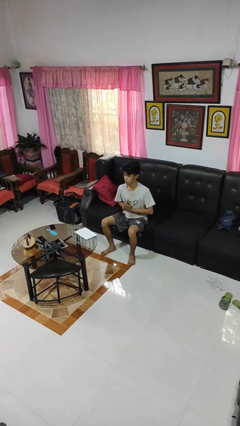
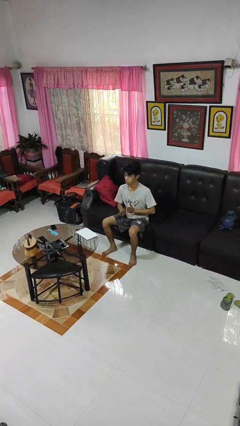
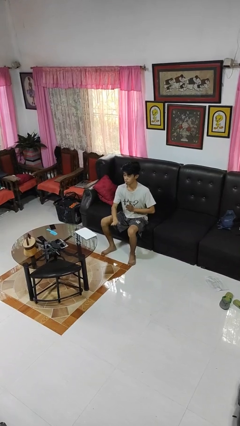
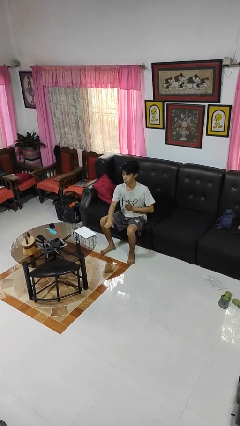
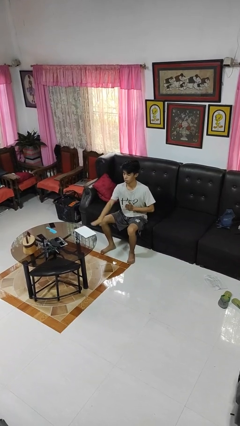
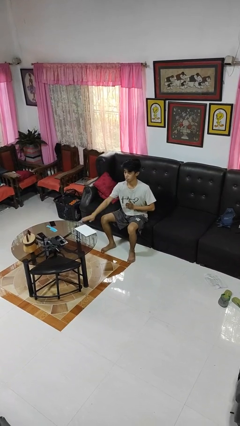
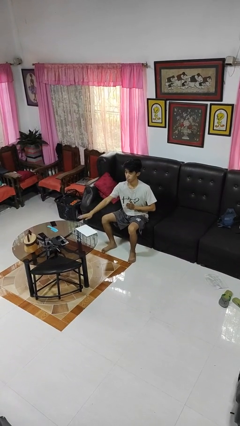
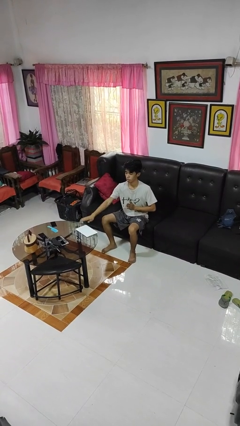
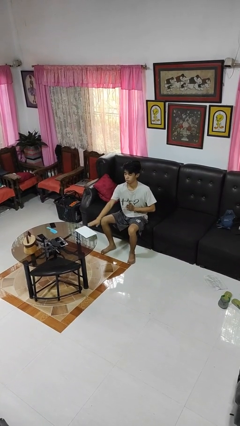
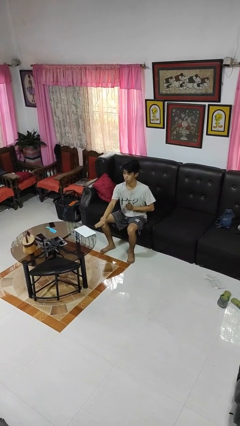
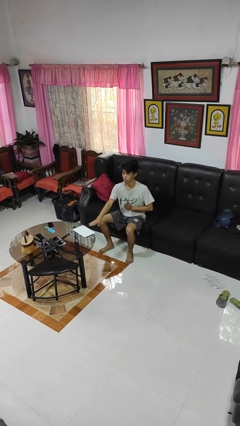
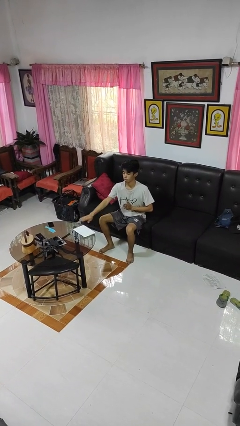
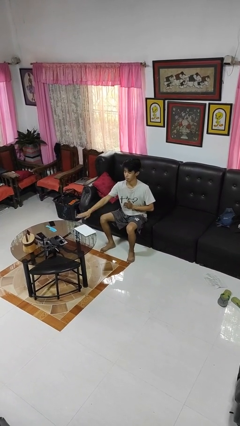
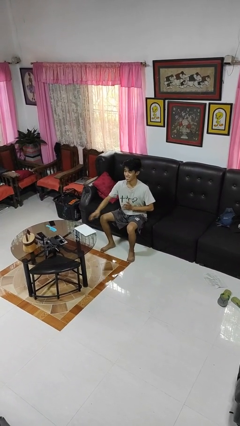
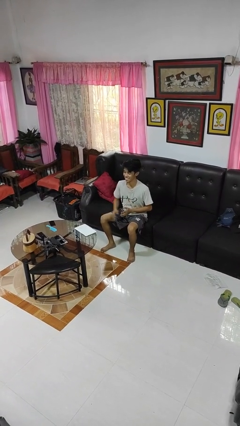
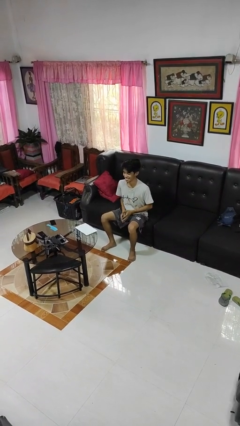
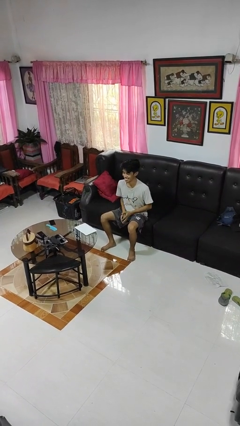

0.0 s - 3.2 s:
person waves hand over object

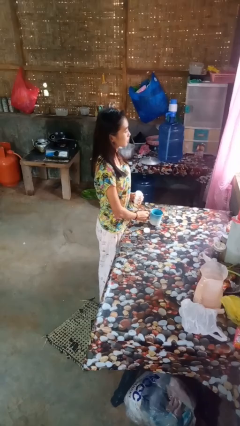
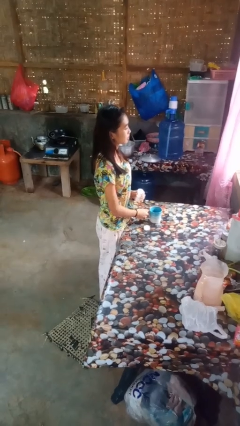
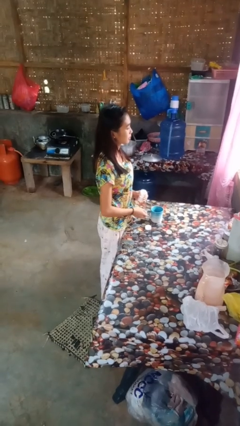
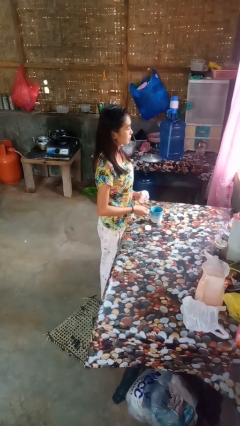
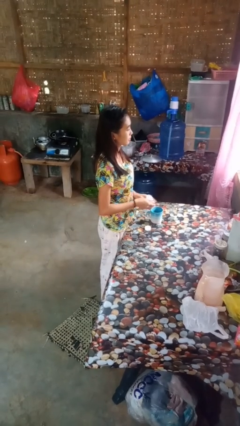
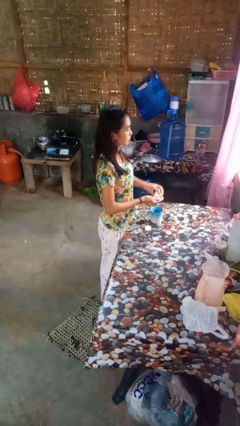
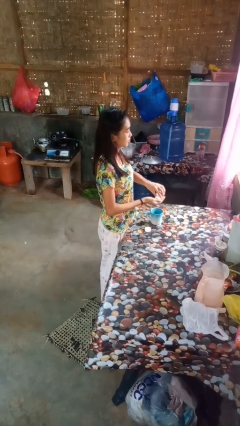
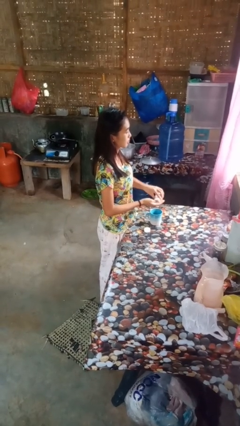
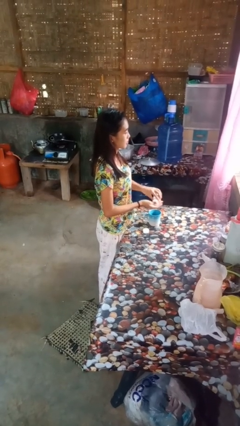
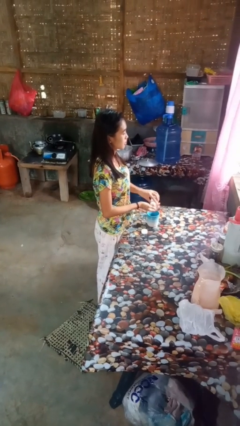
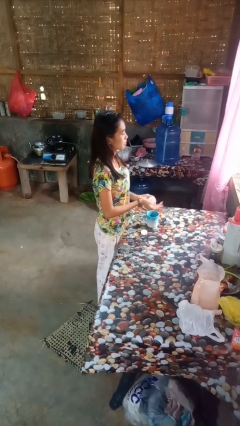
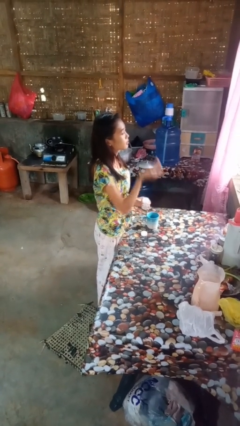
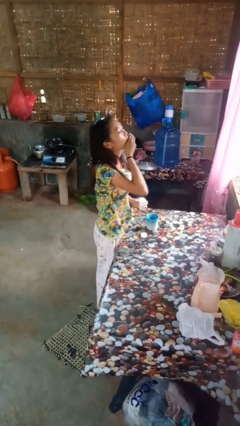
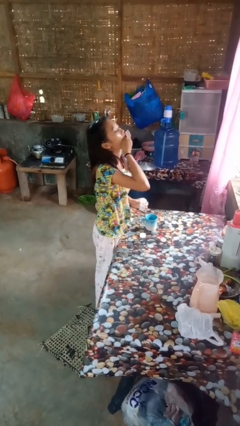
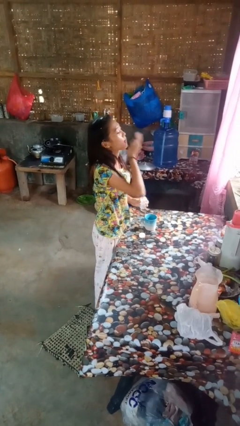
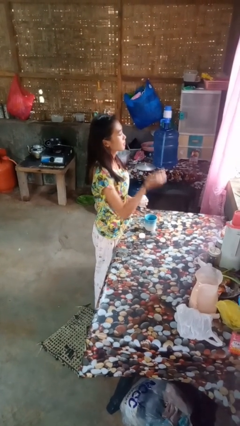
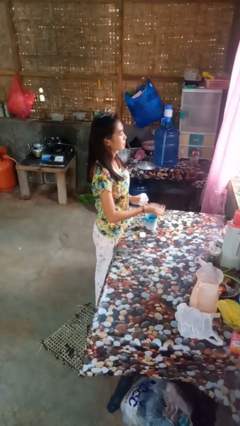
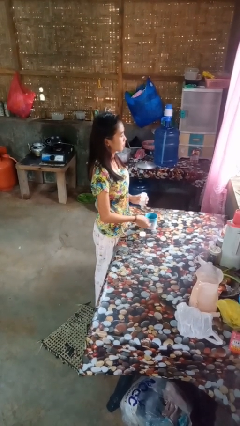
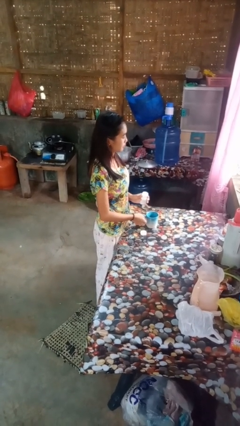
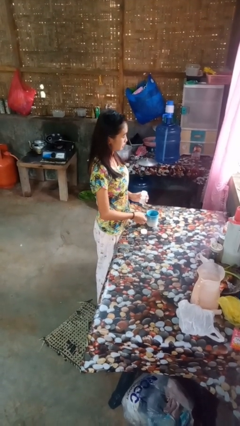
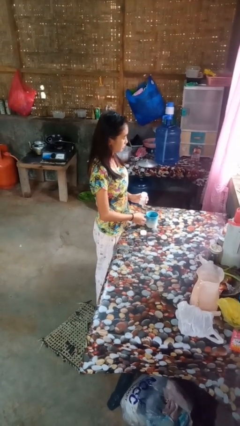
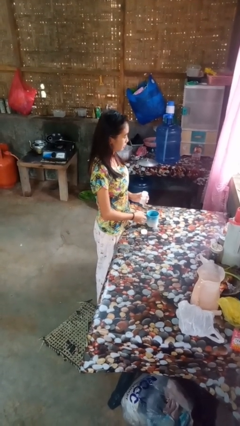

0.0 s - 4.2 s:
person takes medicine pills

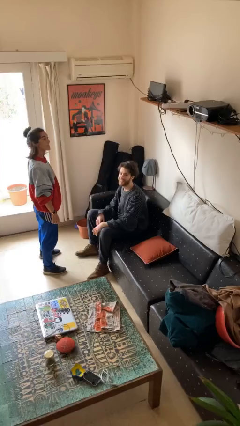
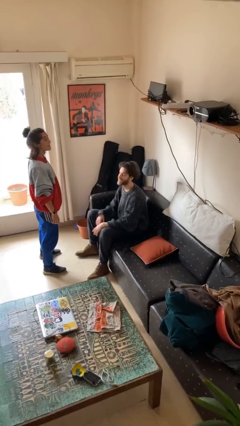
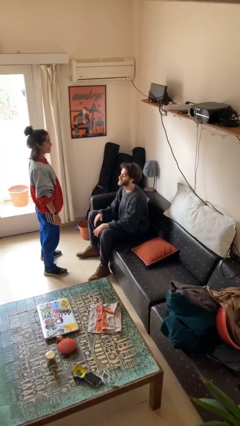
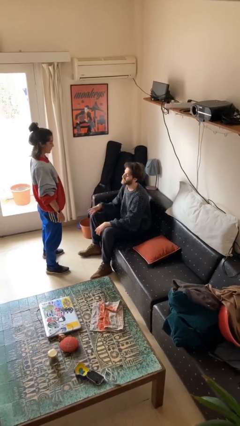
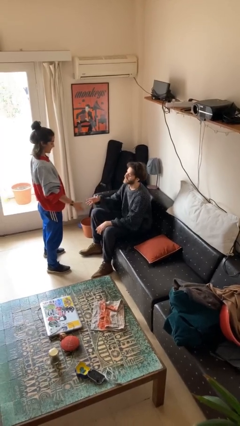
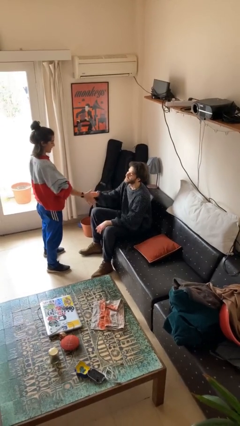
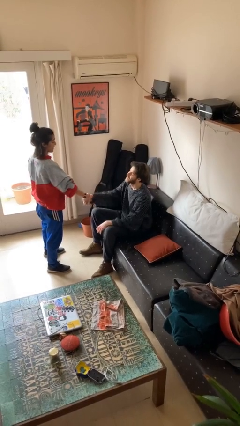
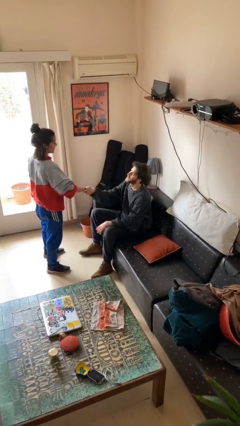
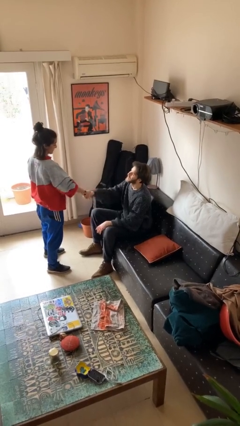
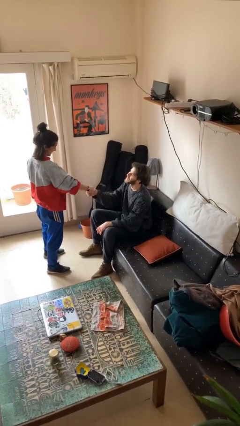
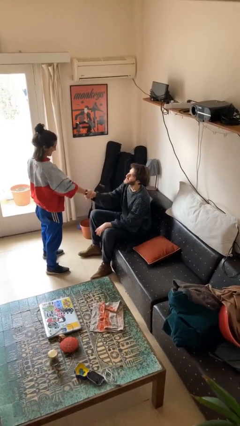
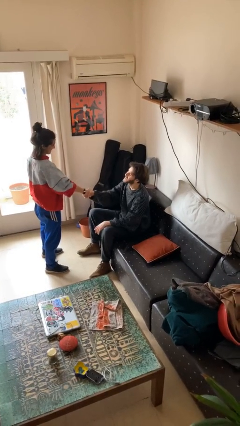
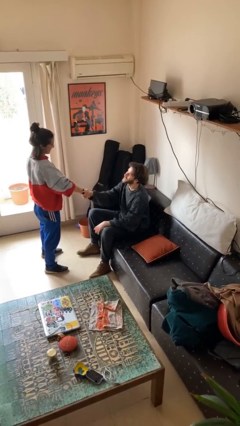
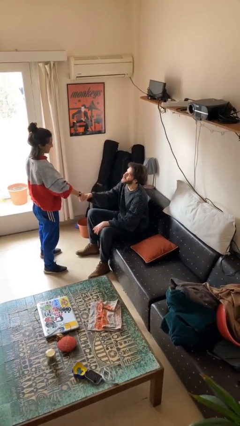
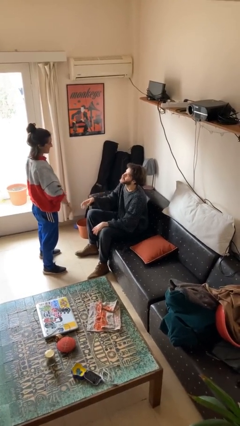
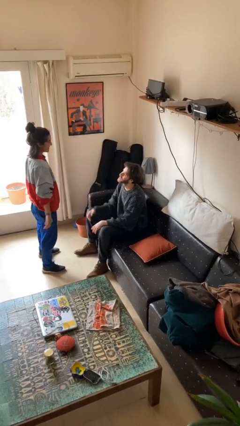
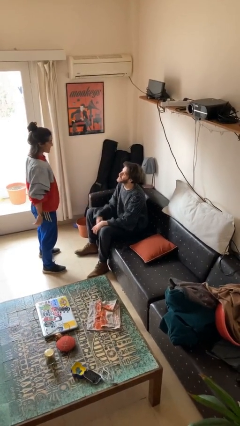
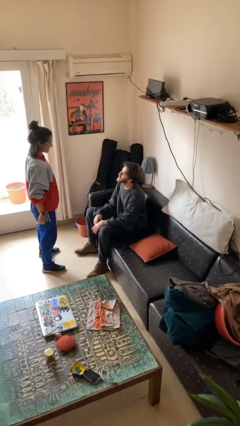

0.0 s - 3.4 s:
person shakes hand

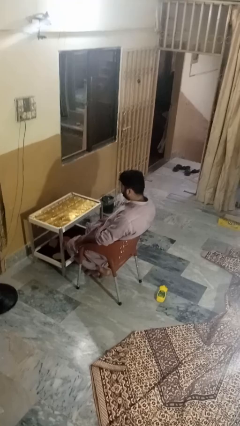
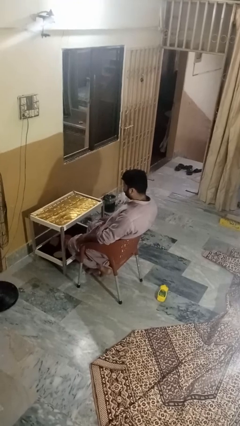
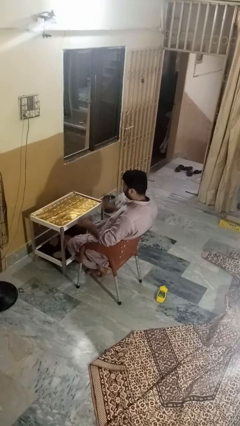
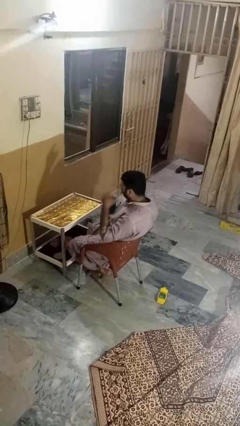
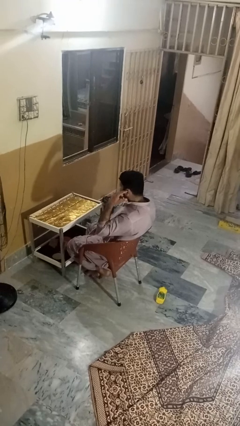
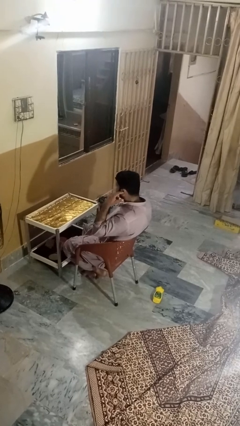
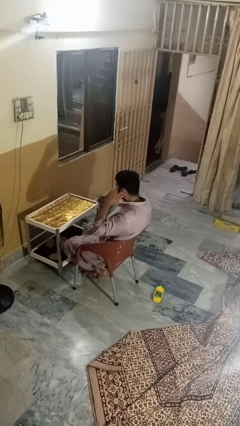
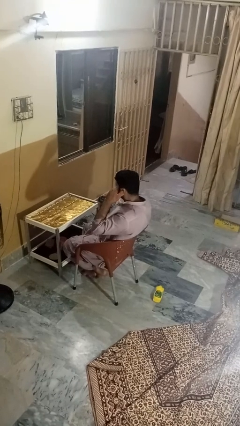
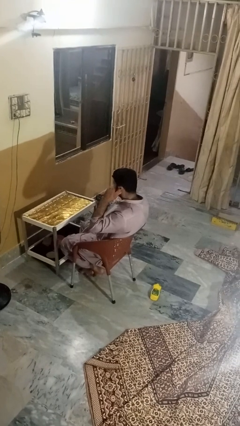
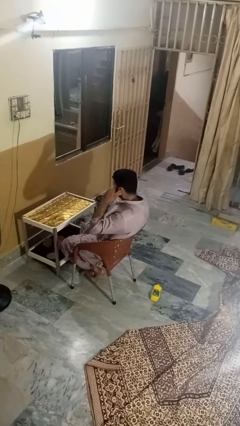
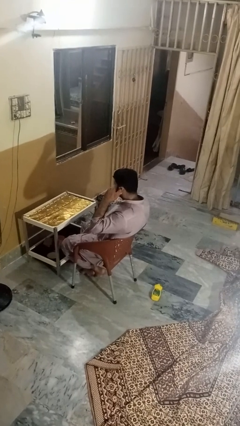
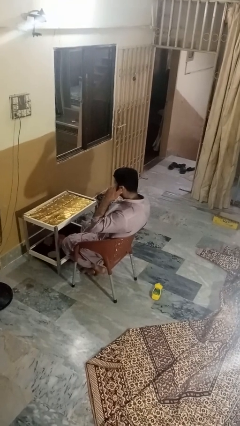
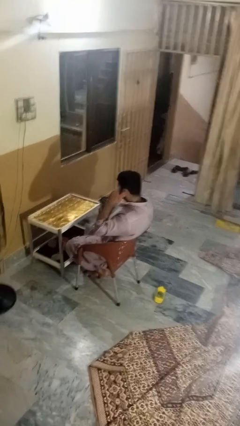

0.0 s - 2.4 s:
person puts fingers in ear

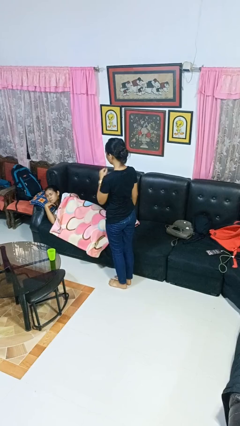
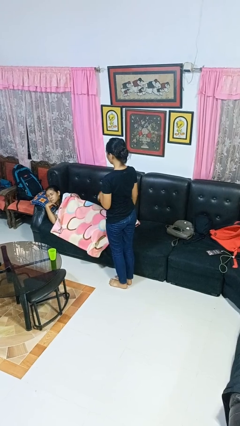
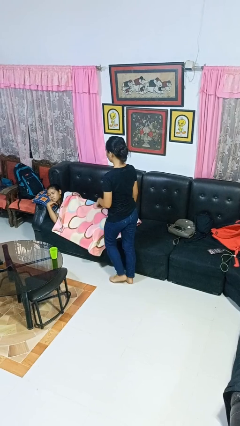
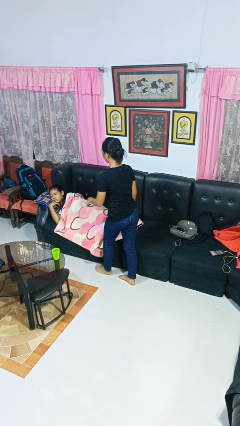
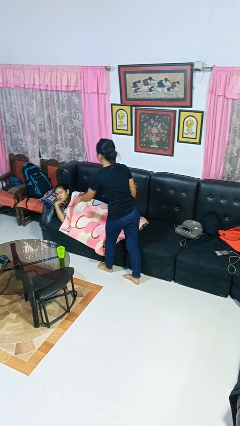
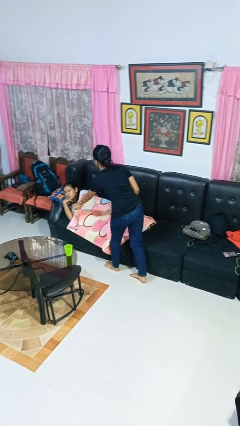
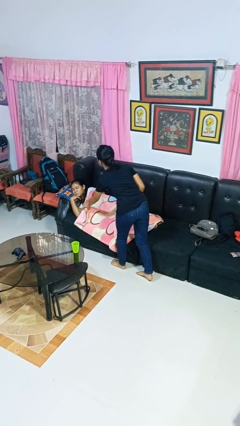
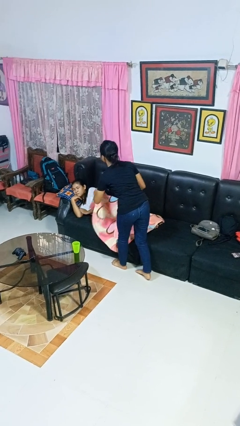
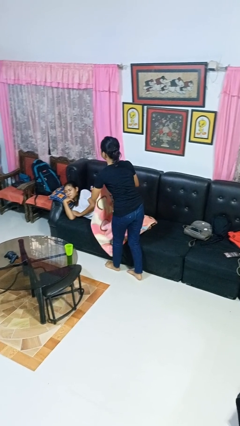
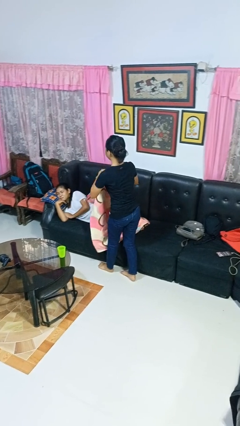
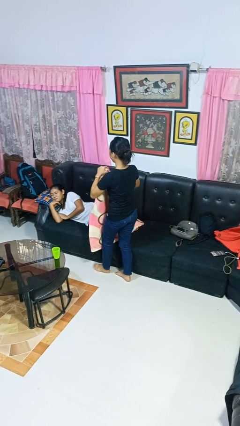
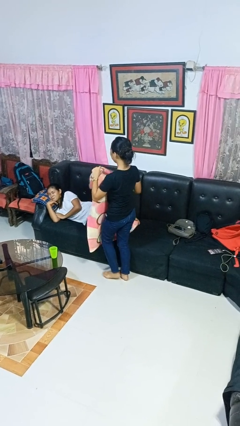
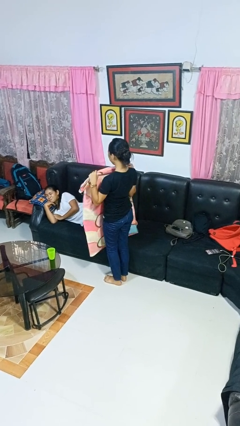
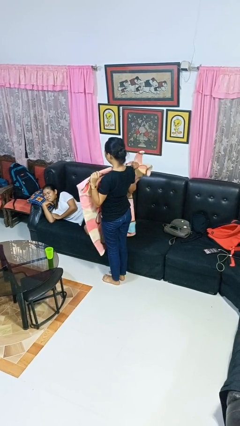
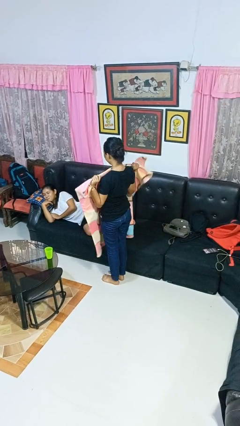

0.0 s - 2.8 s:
person uncovers friend with blanket

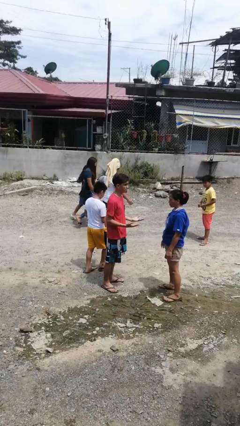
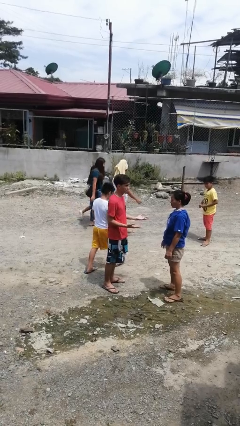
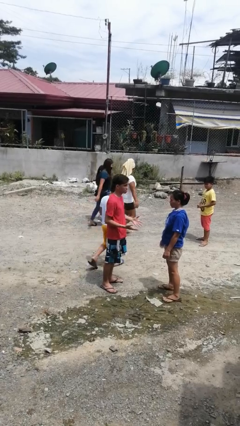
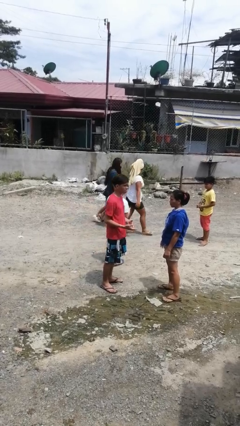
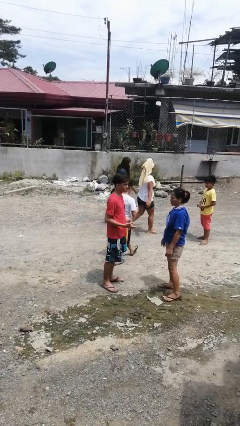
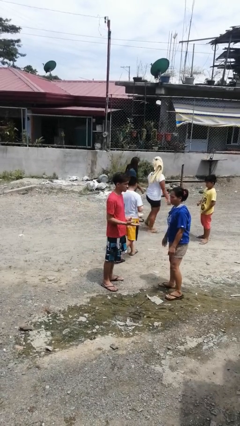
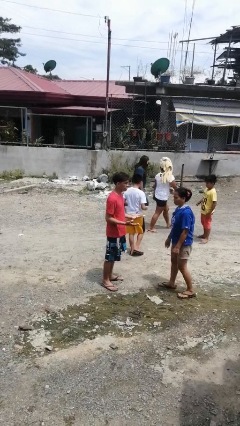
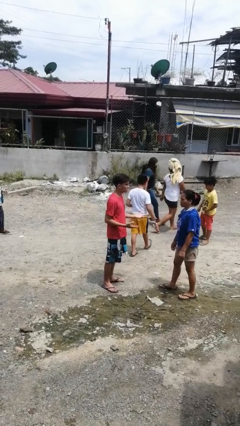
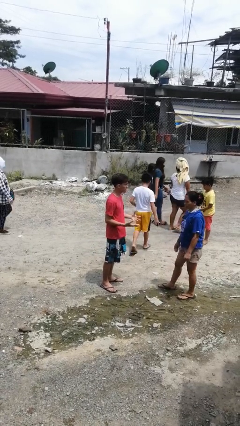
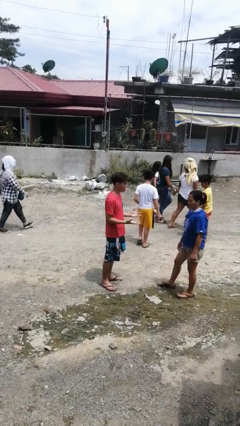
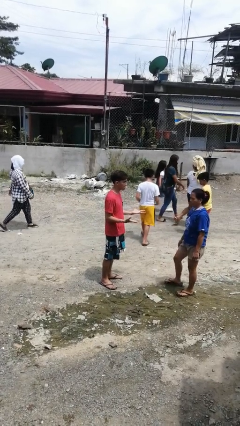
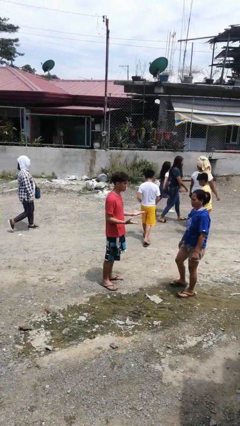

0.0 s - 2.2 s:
person talks to person
